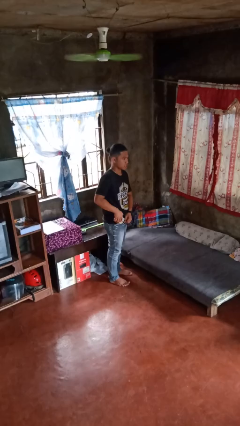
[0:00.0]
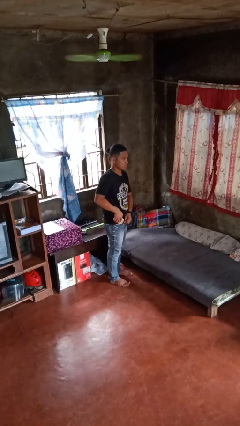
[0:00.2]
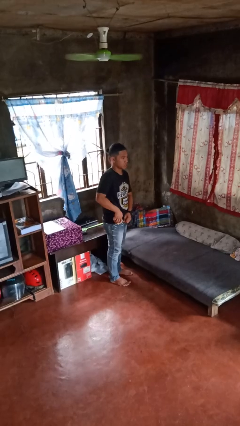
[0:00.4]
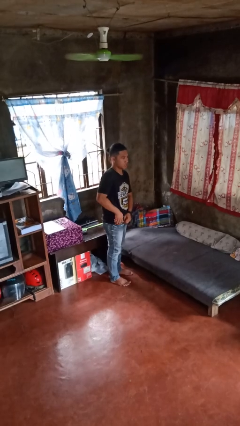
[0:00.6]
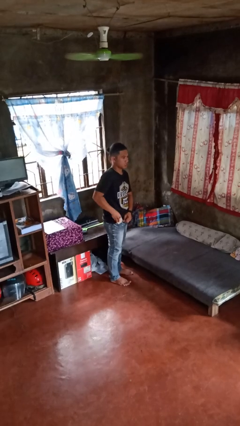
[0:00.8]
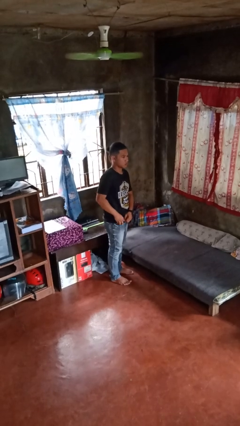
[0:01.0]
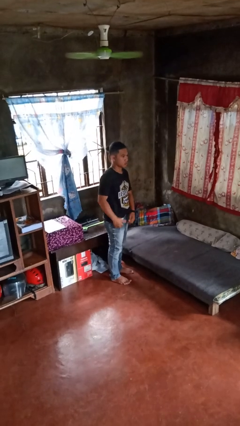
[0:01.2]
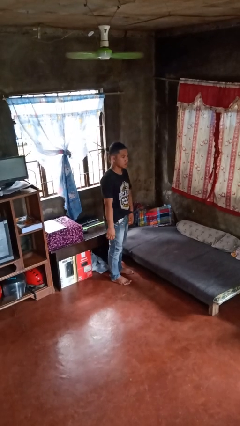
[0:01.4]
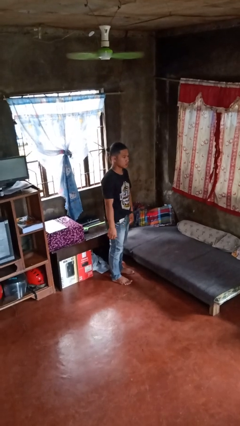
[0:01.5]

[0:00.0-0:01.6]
person puts phone into pocket

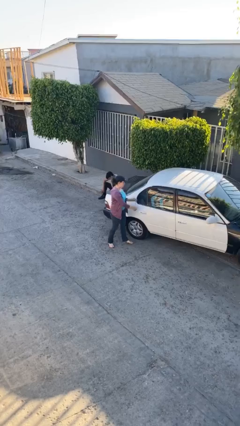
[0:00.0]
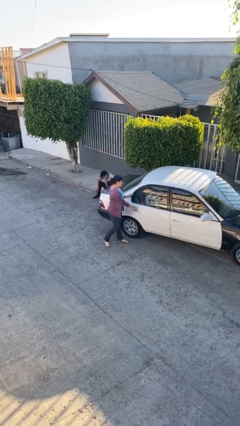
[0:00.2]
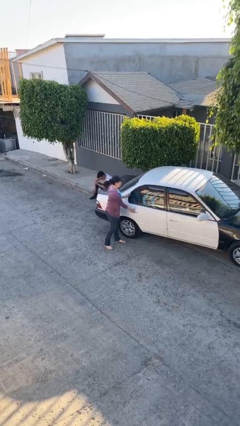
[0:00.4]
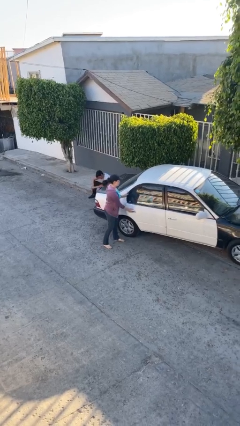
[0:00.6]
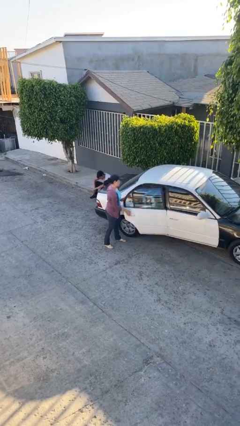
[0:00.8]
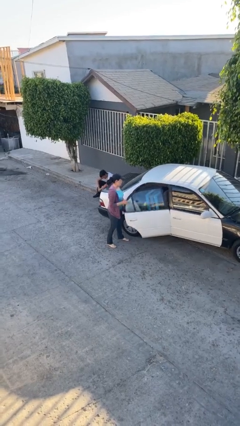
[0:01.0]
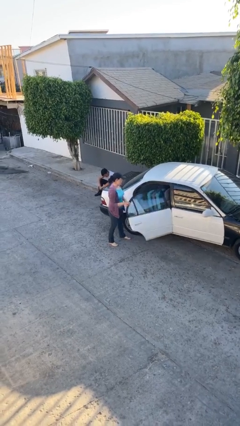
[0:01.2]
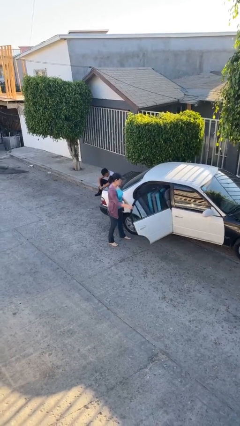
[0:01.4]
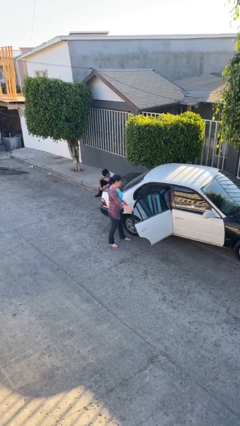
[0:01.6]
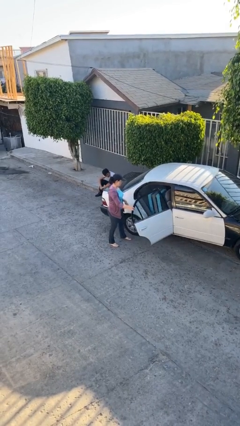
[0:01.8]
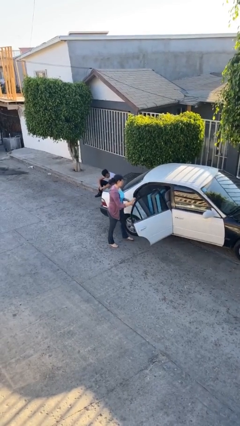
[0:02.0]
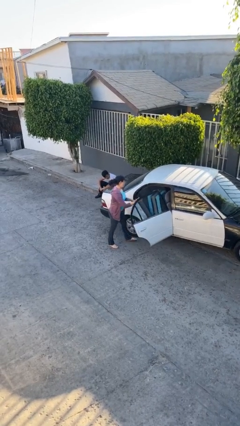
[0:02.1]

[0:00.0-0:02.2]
person opens car door

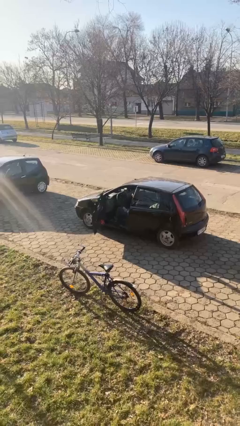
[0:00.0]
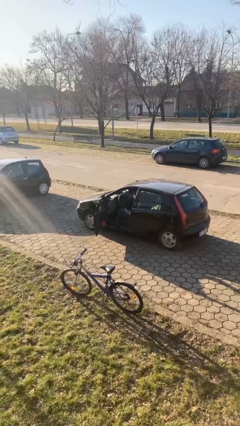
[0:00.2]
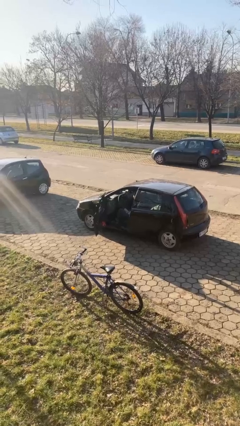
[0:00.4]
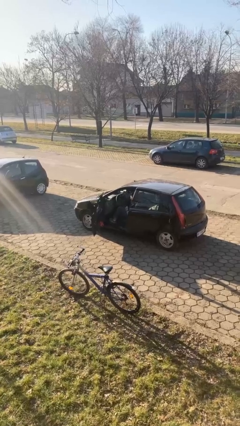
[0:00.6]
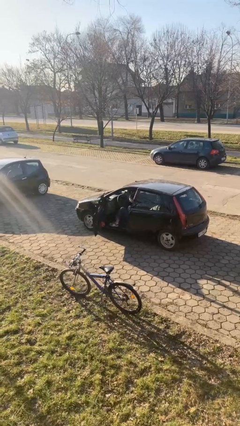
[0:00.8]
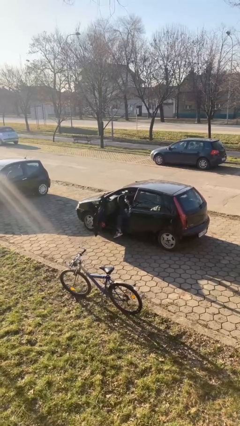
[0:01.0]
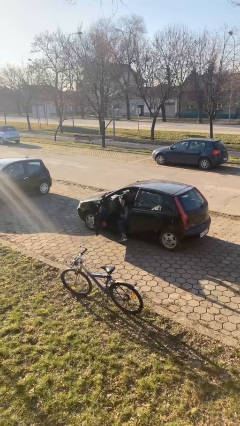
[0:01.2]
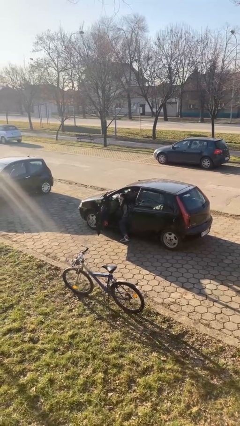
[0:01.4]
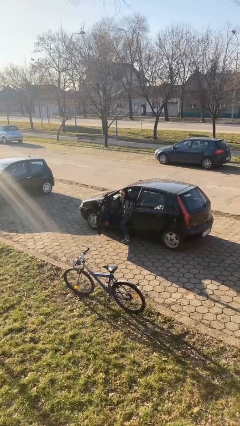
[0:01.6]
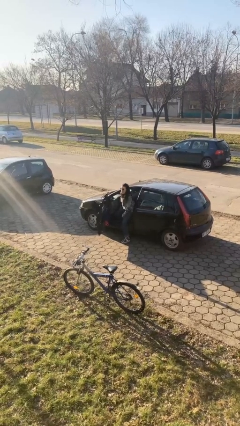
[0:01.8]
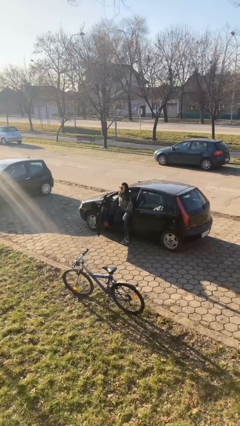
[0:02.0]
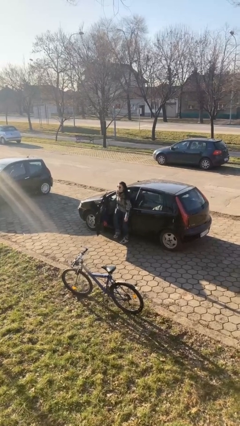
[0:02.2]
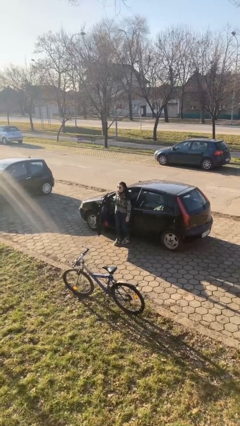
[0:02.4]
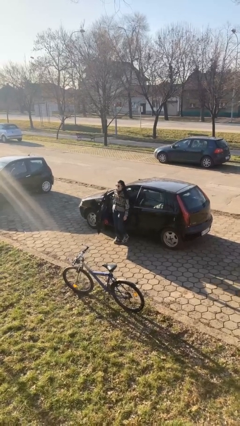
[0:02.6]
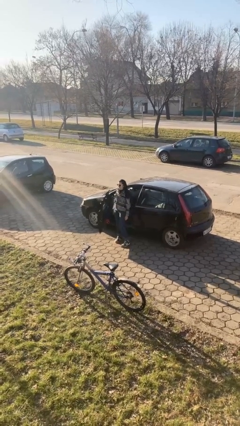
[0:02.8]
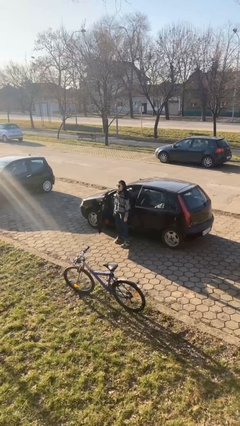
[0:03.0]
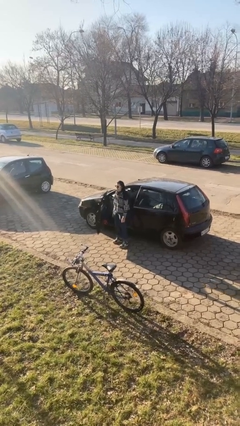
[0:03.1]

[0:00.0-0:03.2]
person exits car

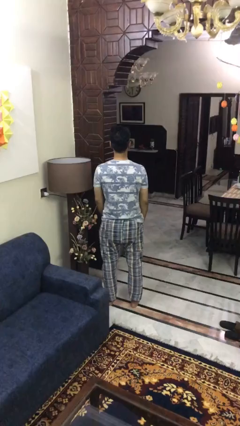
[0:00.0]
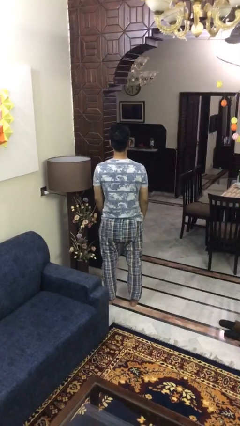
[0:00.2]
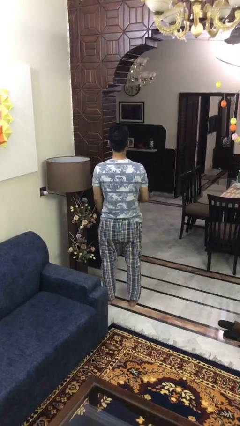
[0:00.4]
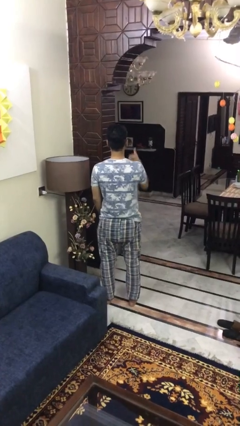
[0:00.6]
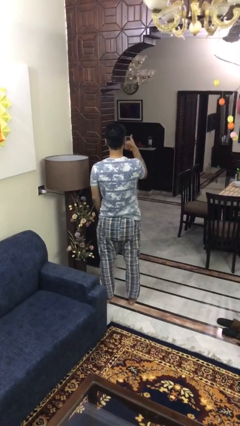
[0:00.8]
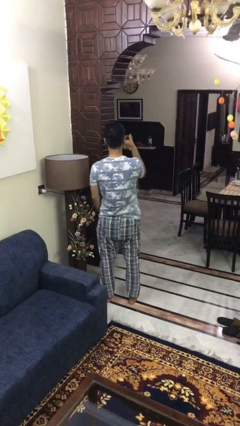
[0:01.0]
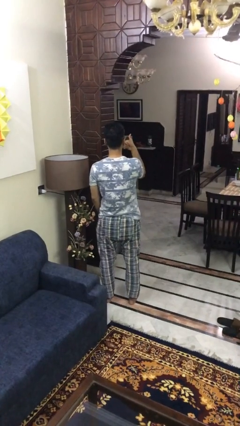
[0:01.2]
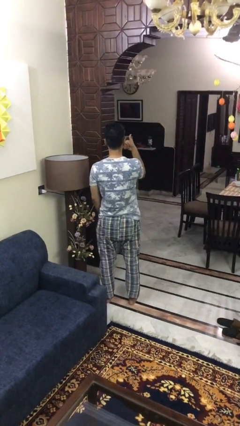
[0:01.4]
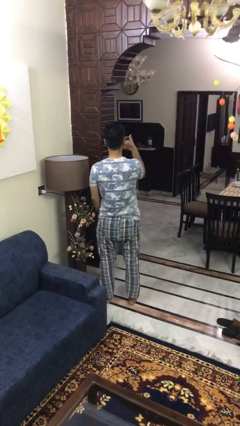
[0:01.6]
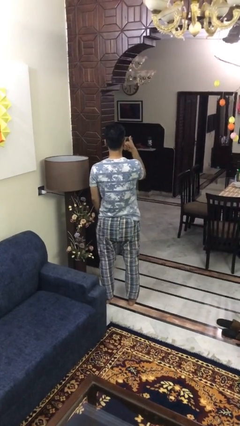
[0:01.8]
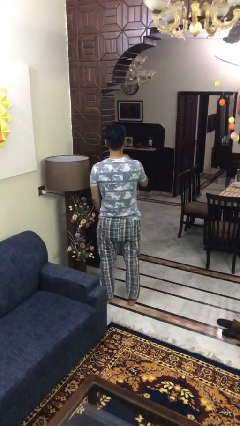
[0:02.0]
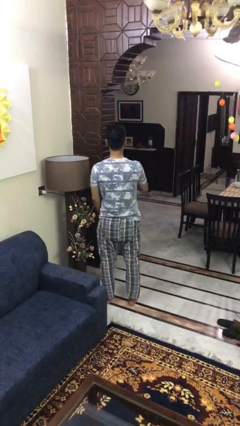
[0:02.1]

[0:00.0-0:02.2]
person gestures thumbs up

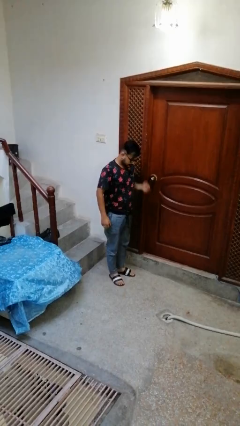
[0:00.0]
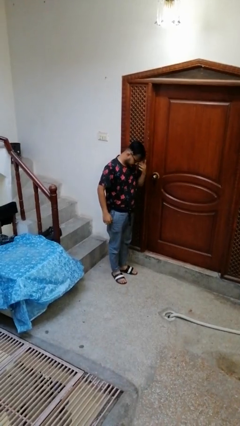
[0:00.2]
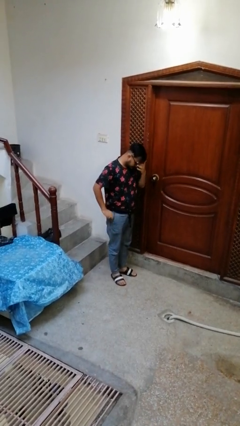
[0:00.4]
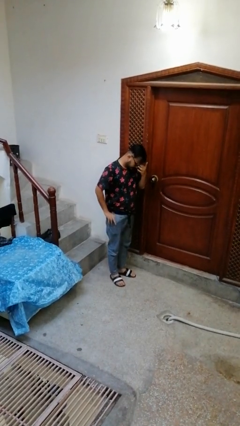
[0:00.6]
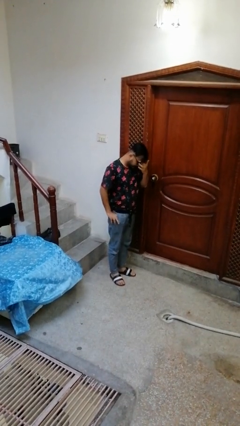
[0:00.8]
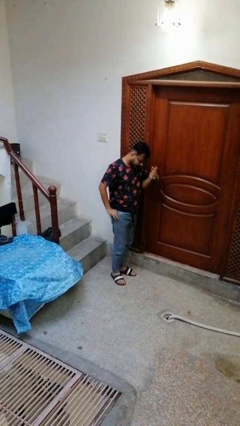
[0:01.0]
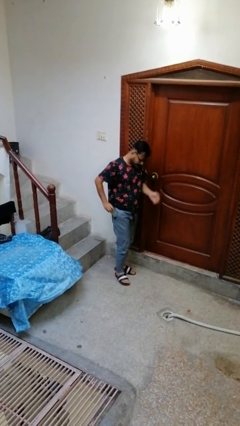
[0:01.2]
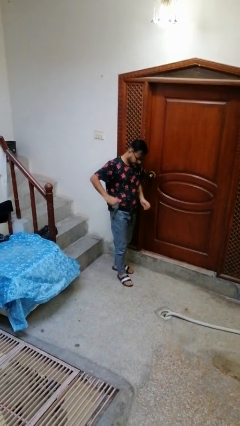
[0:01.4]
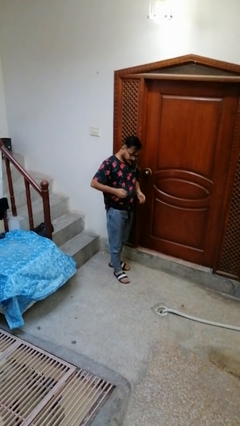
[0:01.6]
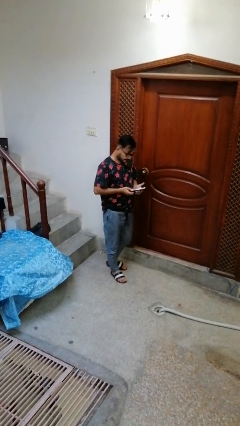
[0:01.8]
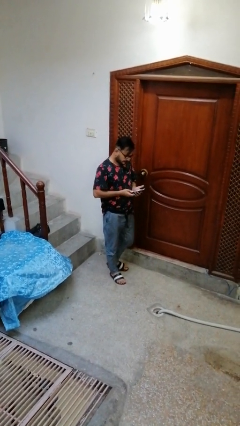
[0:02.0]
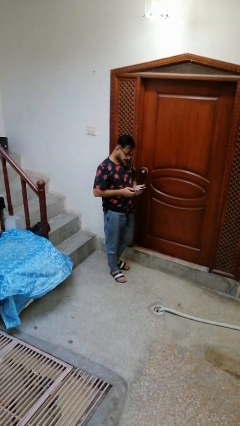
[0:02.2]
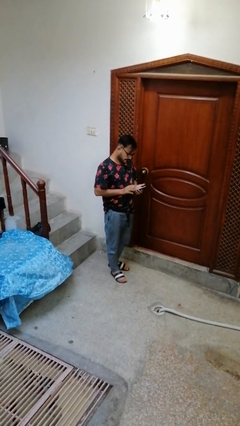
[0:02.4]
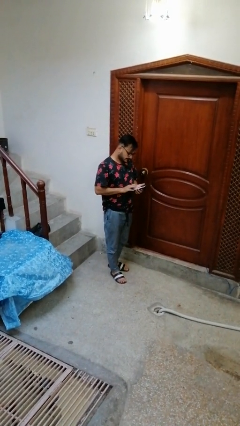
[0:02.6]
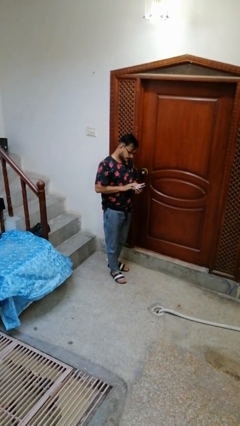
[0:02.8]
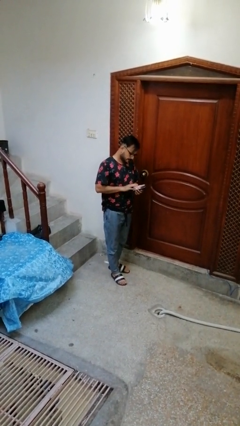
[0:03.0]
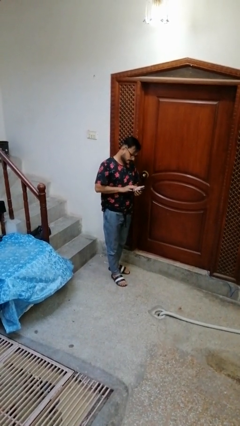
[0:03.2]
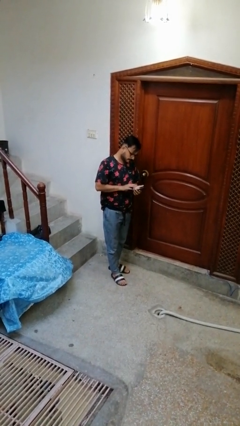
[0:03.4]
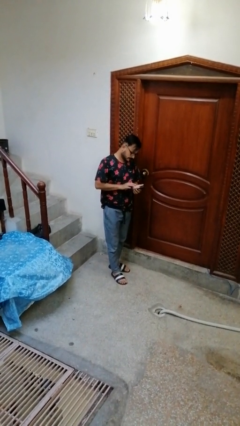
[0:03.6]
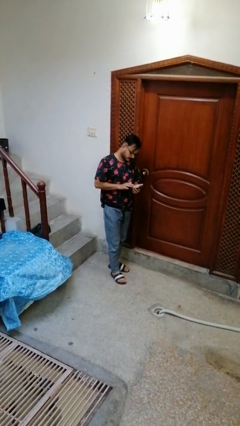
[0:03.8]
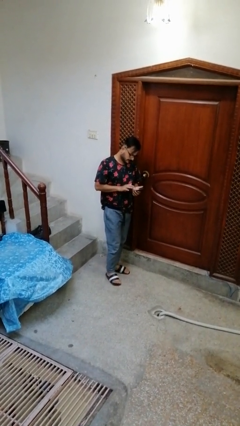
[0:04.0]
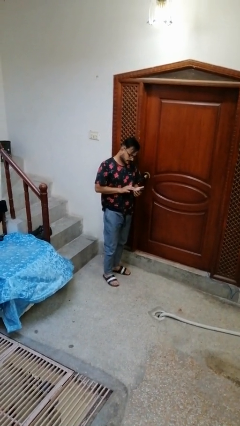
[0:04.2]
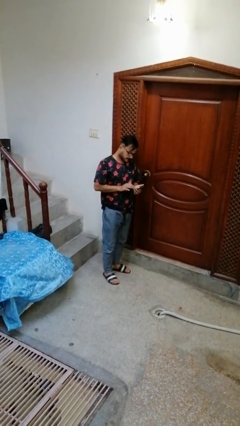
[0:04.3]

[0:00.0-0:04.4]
person takes phone from pocket

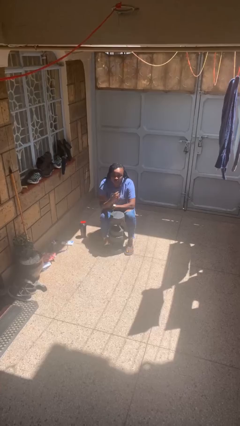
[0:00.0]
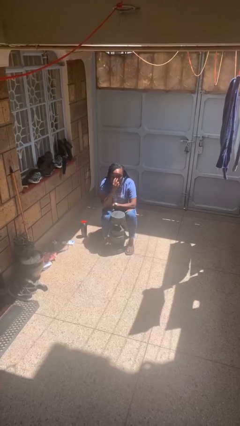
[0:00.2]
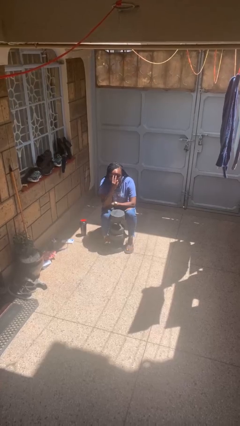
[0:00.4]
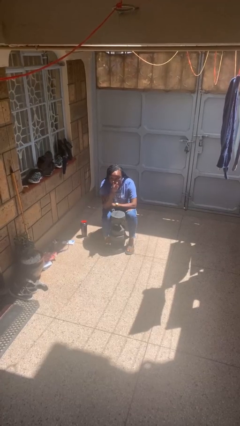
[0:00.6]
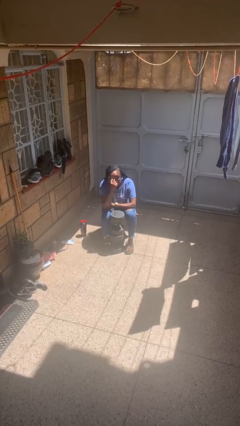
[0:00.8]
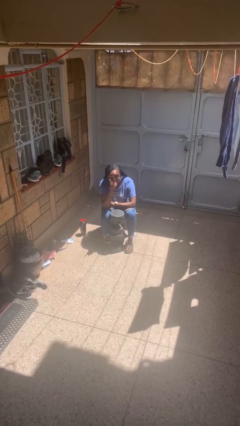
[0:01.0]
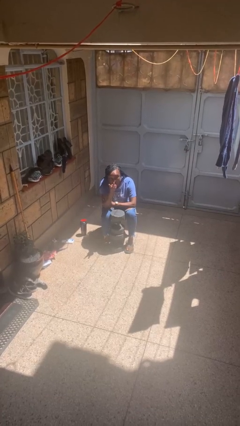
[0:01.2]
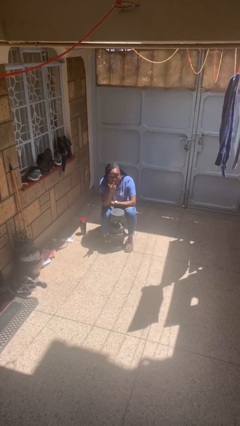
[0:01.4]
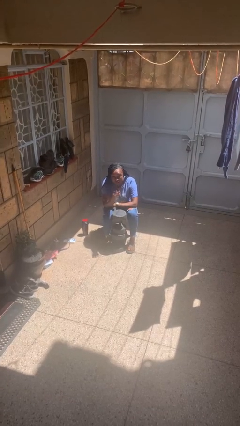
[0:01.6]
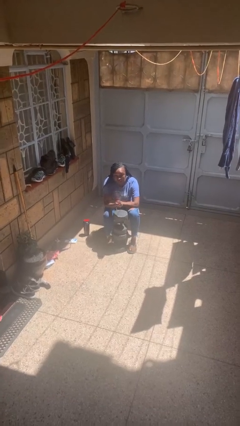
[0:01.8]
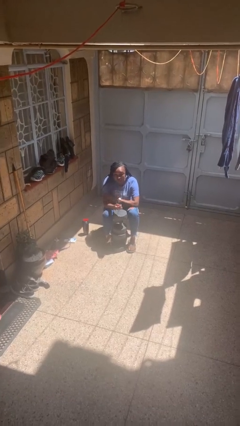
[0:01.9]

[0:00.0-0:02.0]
person gestures watch closely

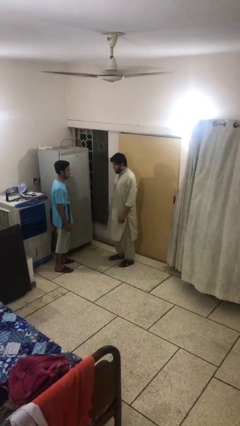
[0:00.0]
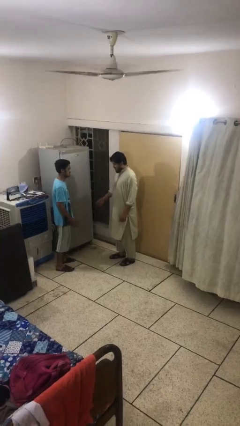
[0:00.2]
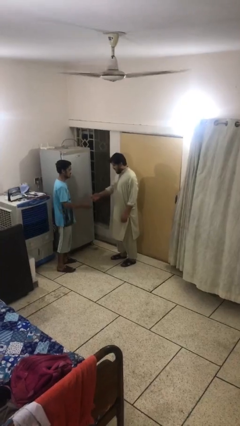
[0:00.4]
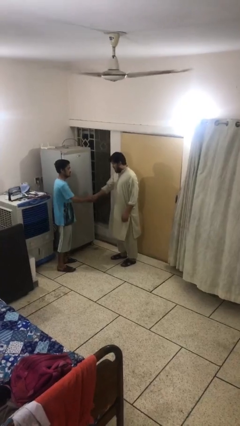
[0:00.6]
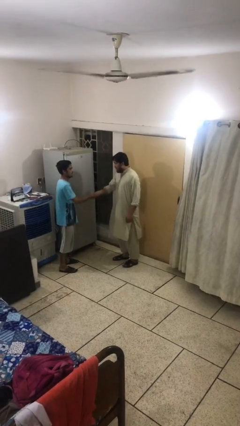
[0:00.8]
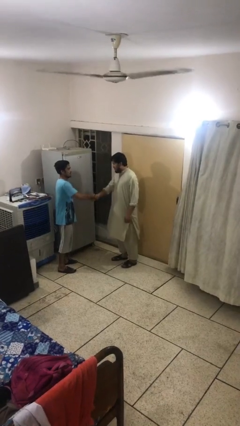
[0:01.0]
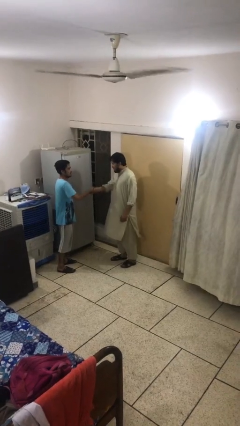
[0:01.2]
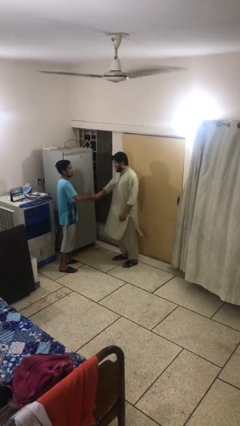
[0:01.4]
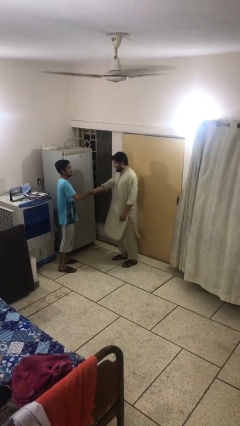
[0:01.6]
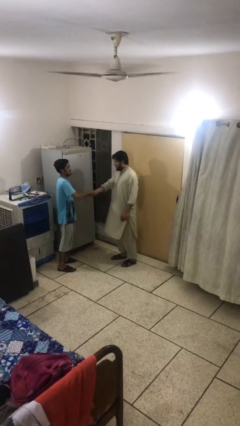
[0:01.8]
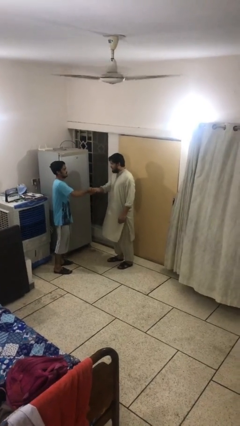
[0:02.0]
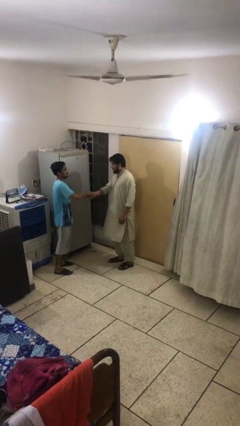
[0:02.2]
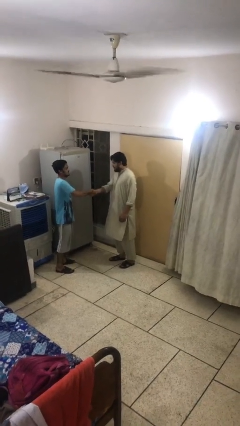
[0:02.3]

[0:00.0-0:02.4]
person shakes hand
